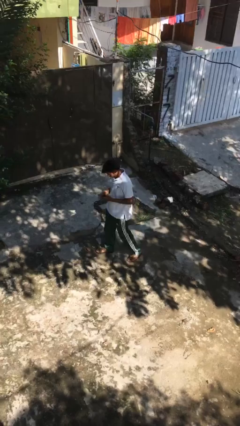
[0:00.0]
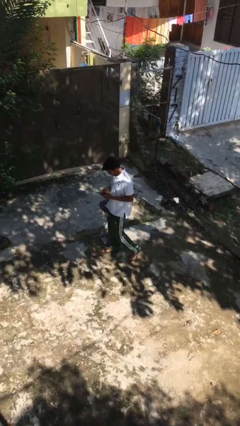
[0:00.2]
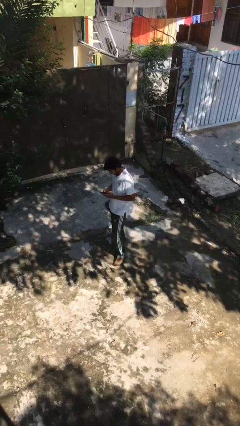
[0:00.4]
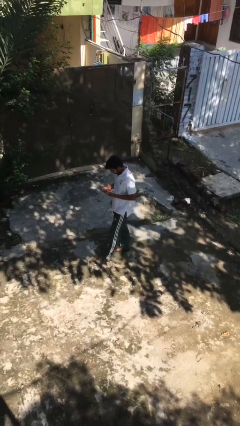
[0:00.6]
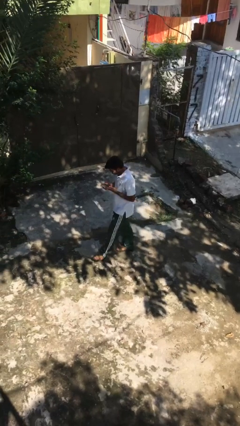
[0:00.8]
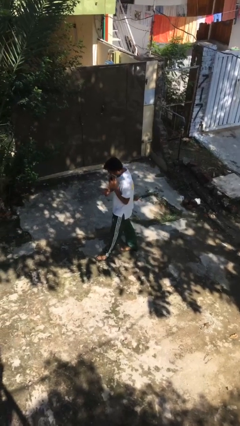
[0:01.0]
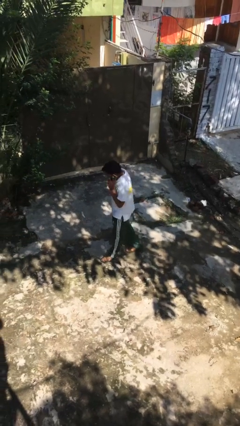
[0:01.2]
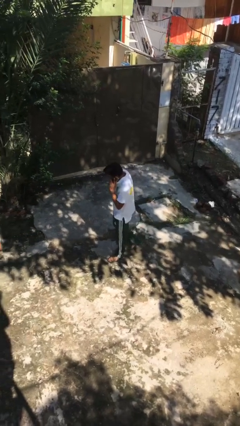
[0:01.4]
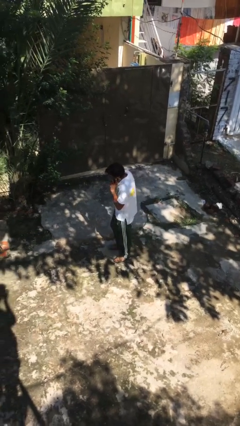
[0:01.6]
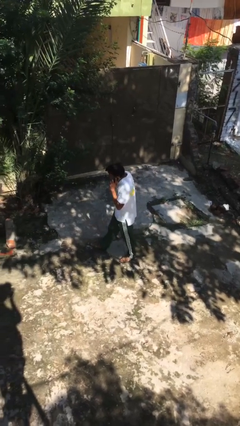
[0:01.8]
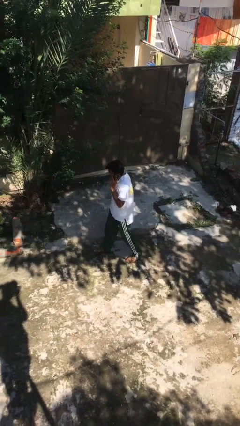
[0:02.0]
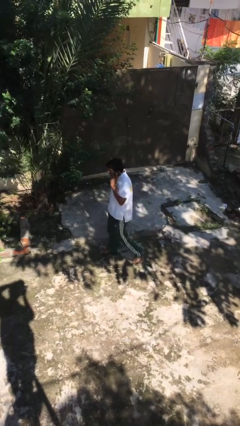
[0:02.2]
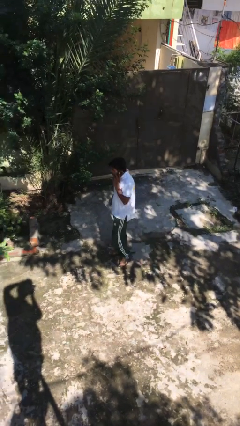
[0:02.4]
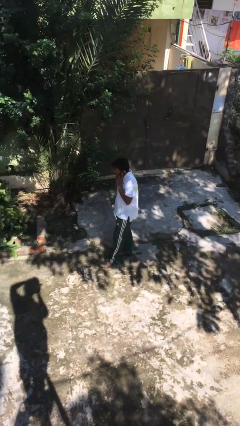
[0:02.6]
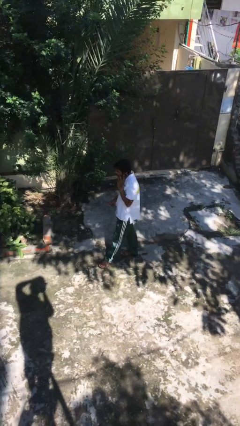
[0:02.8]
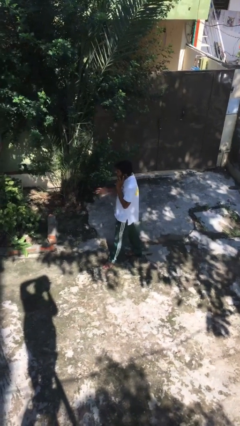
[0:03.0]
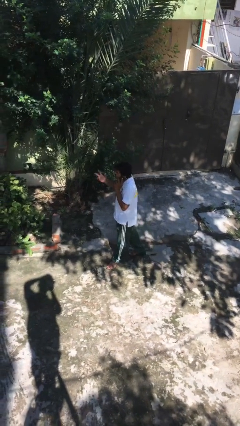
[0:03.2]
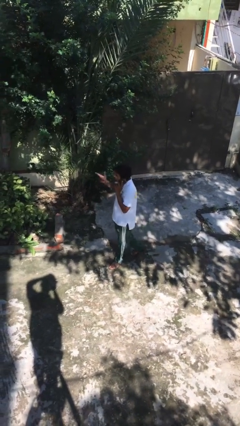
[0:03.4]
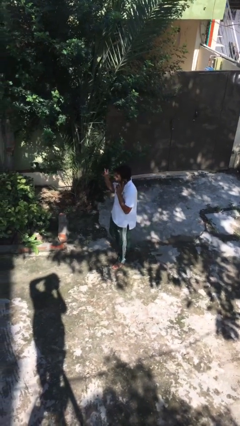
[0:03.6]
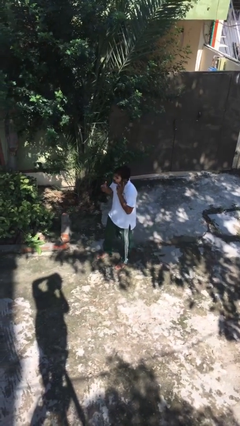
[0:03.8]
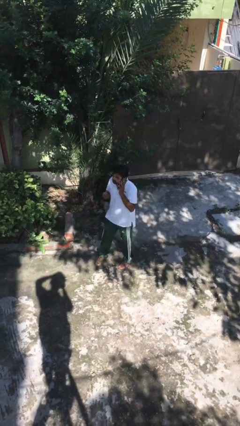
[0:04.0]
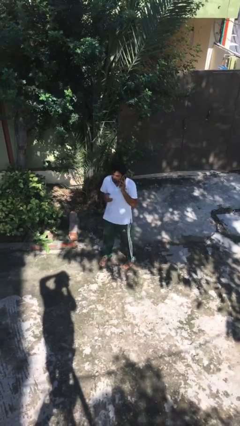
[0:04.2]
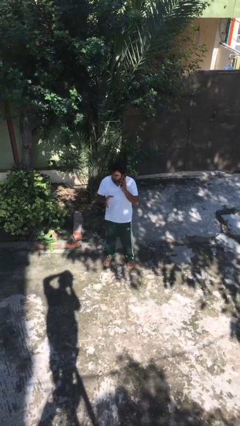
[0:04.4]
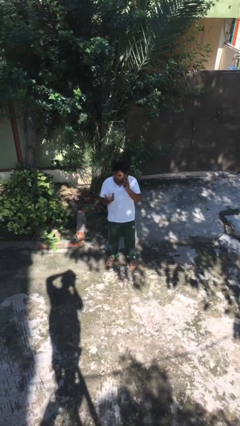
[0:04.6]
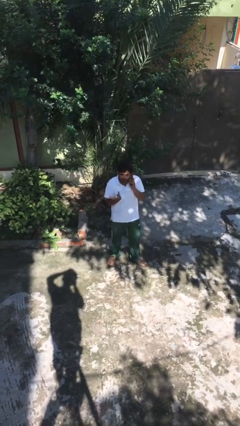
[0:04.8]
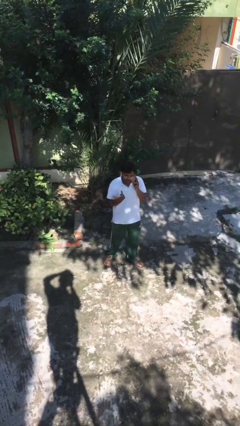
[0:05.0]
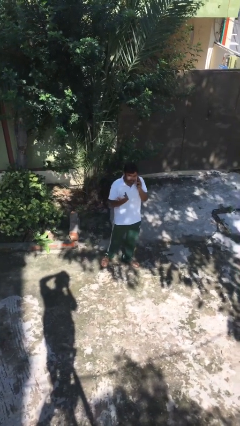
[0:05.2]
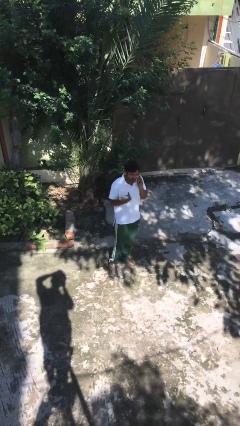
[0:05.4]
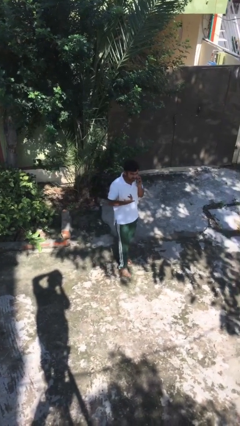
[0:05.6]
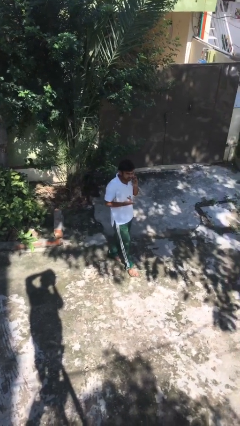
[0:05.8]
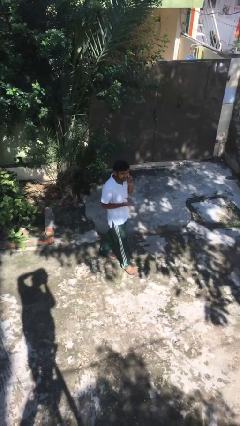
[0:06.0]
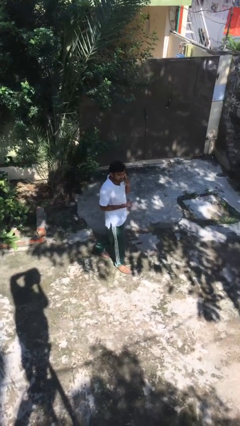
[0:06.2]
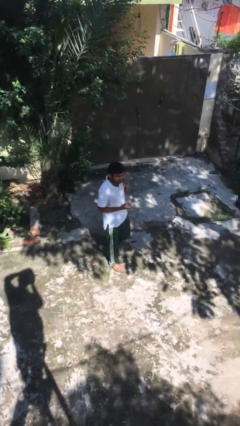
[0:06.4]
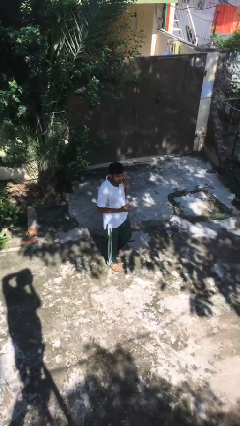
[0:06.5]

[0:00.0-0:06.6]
person talks on phone

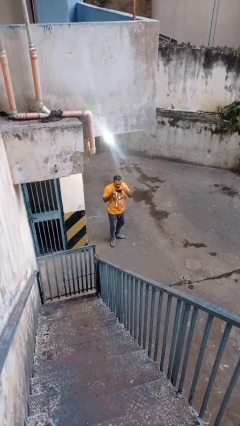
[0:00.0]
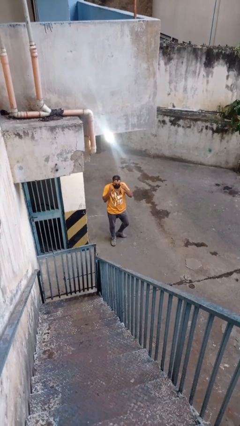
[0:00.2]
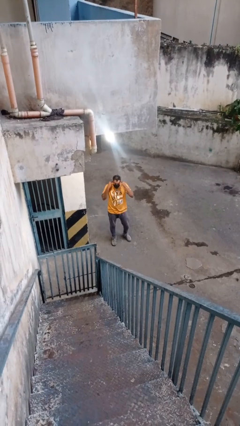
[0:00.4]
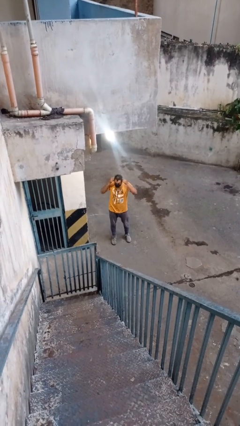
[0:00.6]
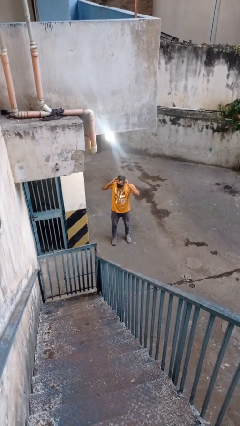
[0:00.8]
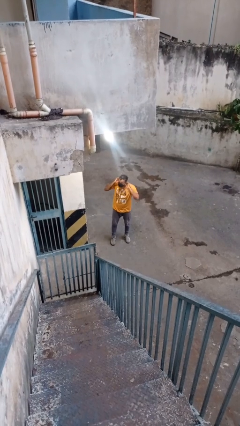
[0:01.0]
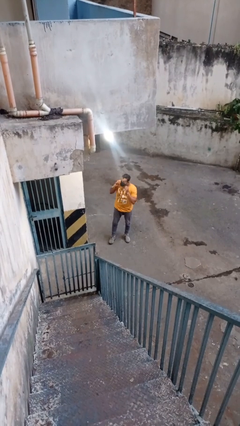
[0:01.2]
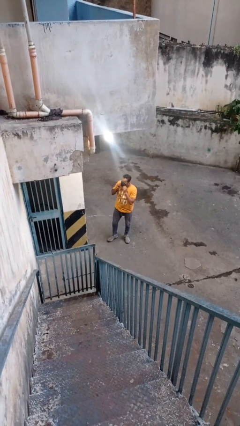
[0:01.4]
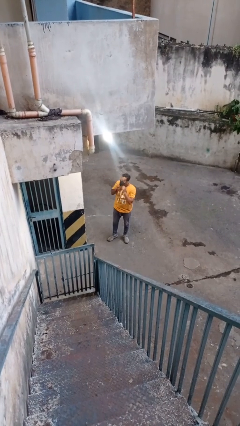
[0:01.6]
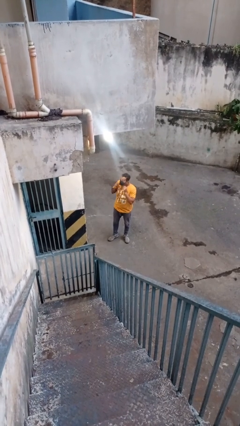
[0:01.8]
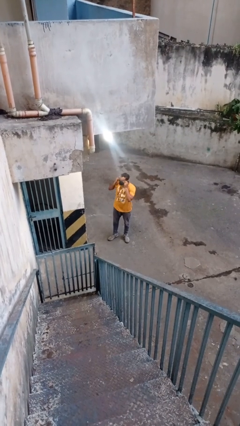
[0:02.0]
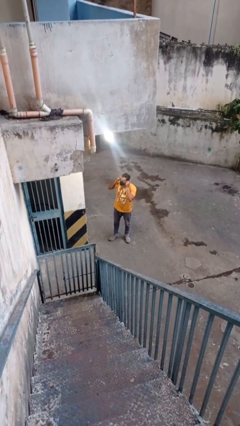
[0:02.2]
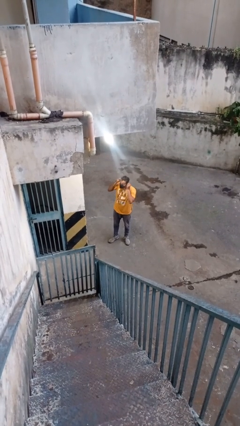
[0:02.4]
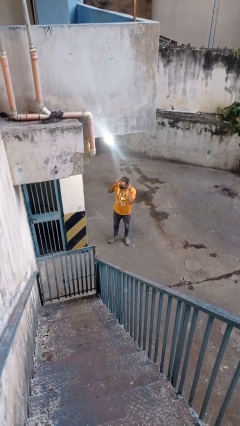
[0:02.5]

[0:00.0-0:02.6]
person puts on facemask

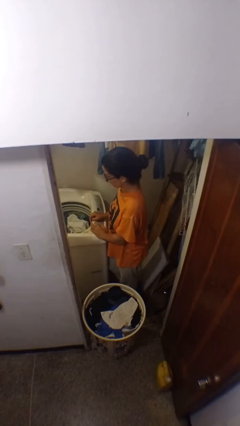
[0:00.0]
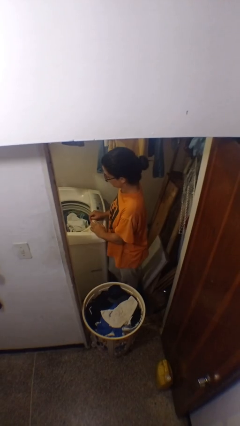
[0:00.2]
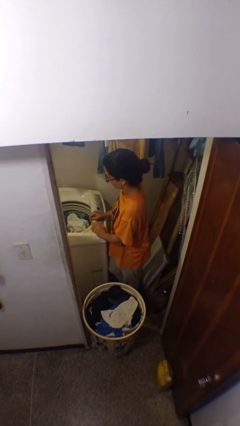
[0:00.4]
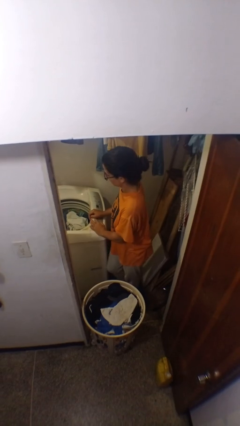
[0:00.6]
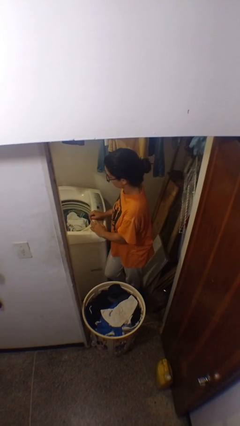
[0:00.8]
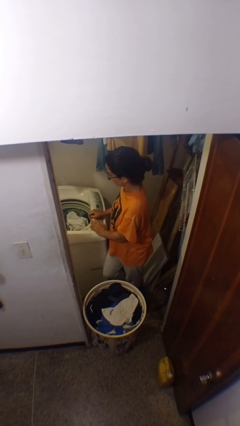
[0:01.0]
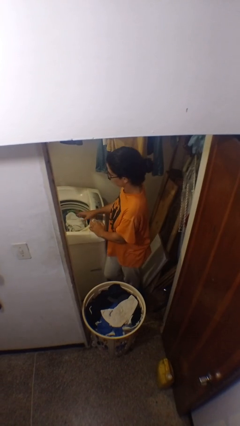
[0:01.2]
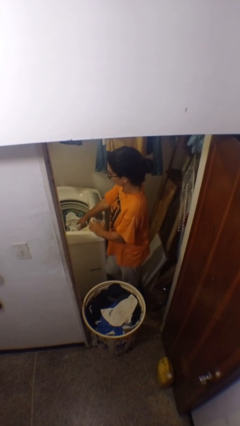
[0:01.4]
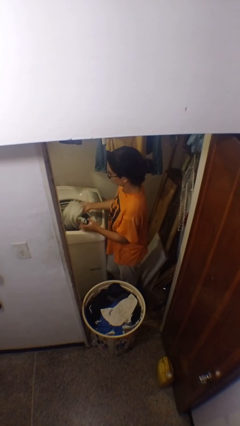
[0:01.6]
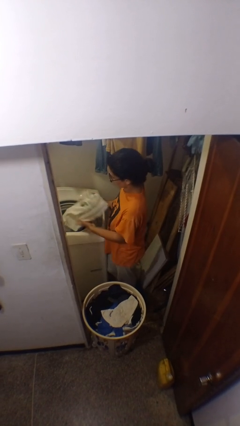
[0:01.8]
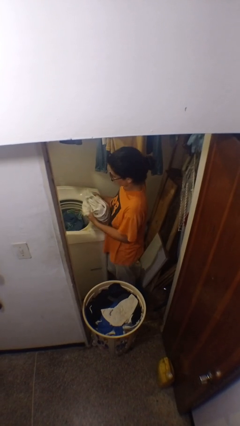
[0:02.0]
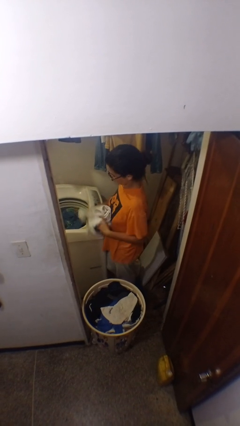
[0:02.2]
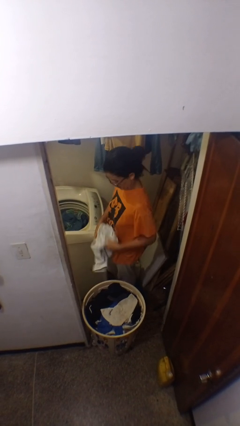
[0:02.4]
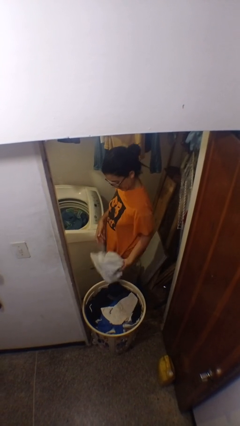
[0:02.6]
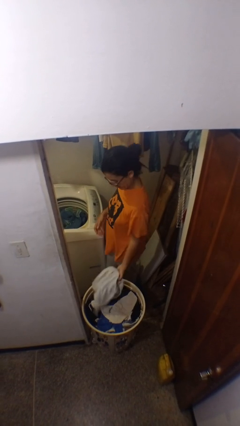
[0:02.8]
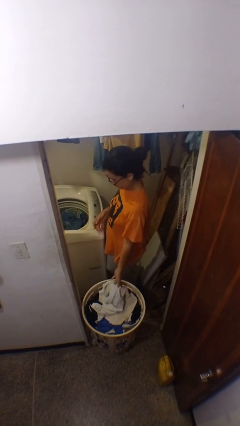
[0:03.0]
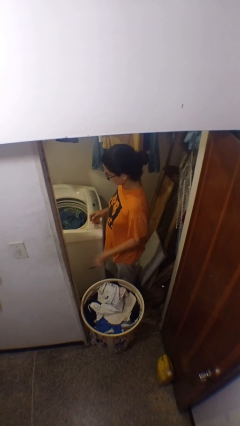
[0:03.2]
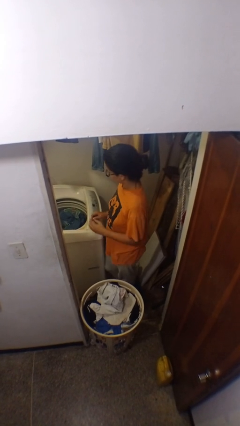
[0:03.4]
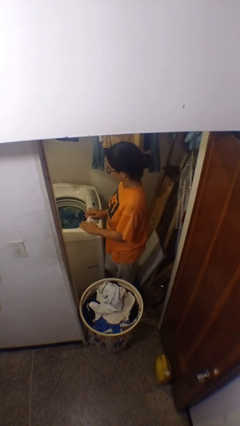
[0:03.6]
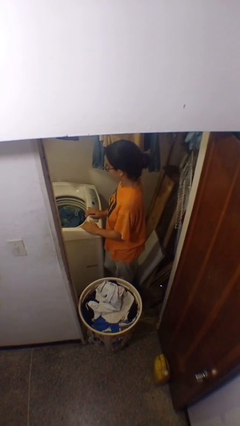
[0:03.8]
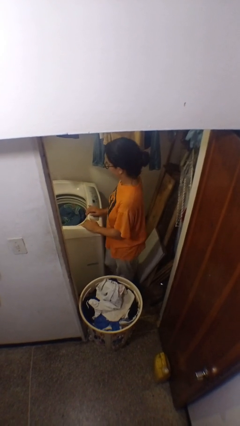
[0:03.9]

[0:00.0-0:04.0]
person unloads clotheswasher

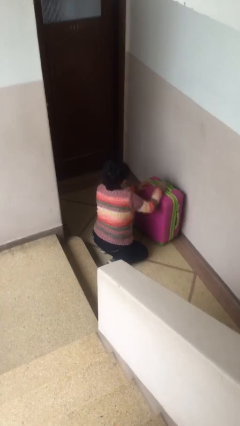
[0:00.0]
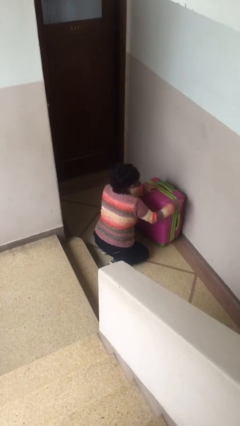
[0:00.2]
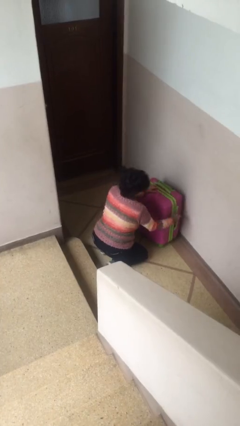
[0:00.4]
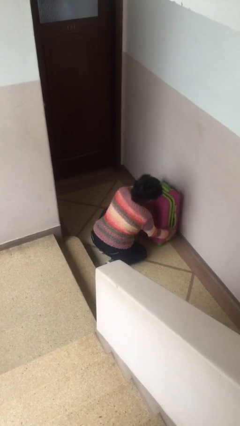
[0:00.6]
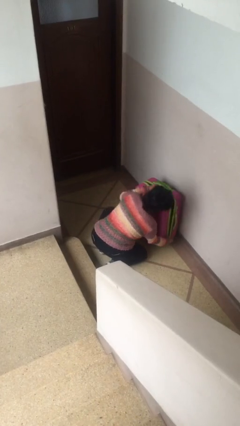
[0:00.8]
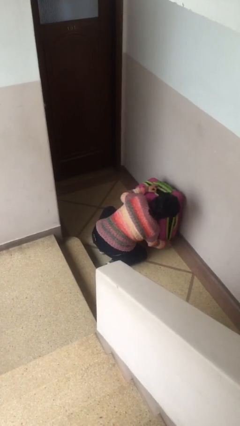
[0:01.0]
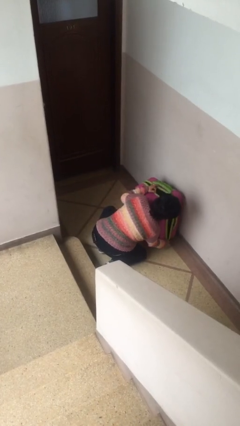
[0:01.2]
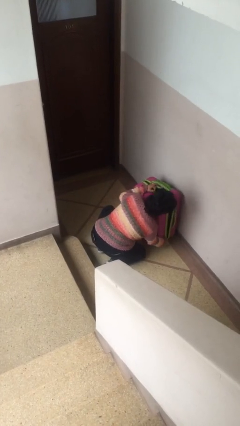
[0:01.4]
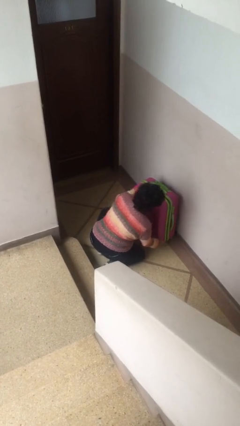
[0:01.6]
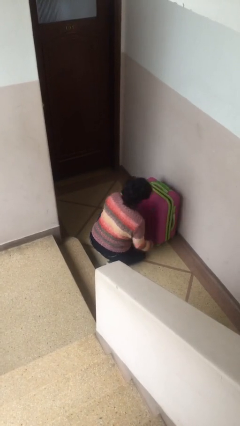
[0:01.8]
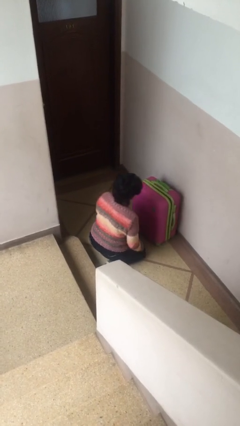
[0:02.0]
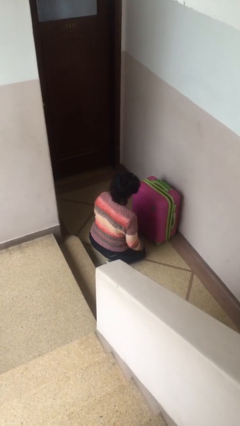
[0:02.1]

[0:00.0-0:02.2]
person opens suitcase

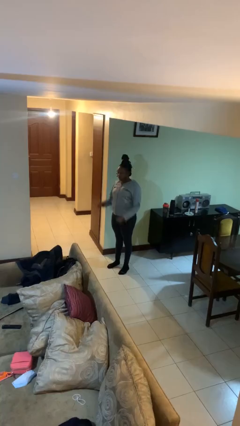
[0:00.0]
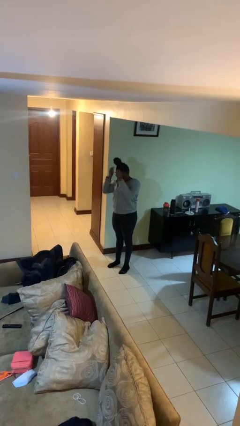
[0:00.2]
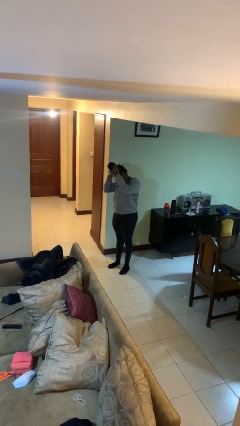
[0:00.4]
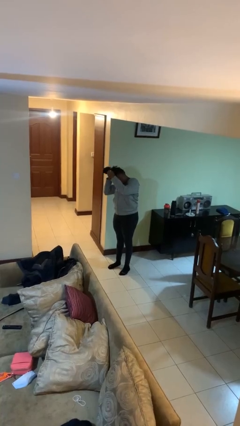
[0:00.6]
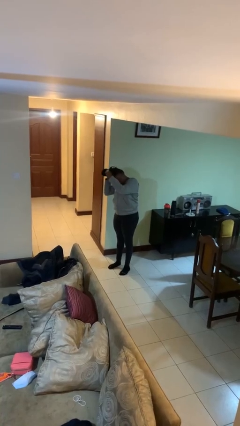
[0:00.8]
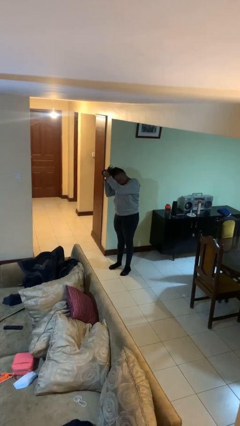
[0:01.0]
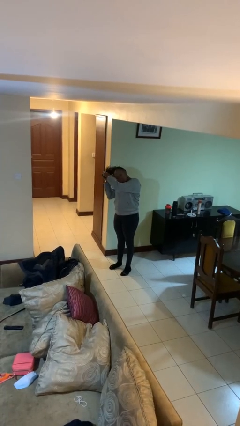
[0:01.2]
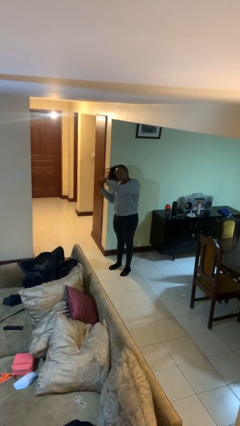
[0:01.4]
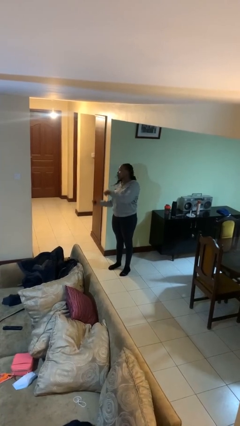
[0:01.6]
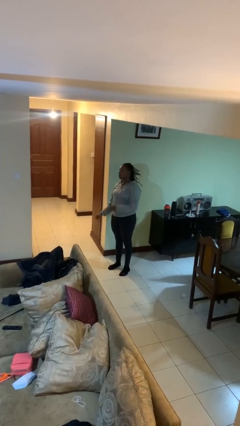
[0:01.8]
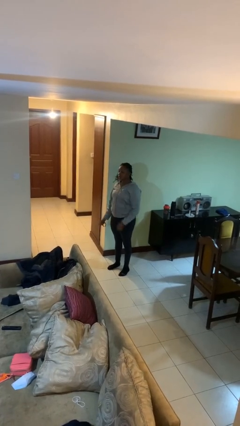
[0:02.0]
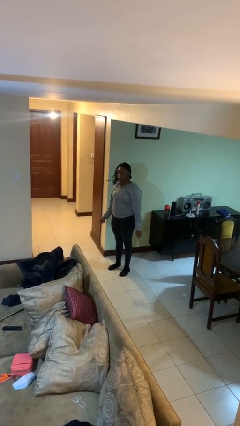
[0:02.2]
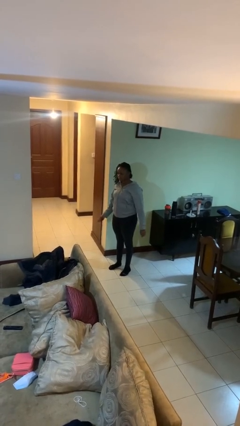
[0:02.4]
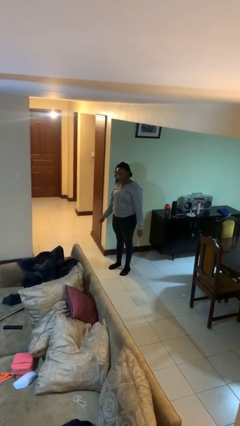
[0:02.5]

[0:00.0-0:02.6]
person takes off hairtie
